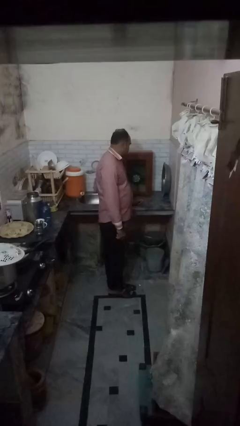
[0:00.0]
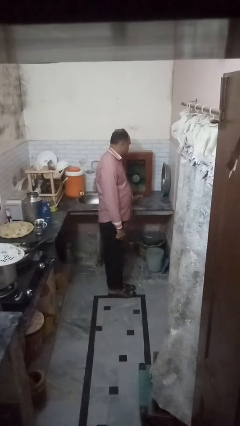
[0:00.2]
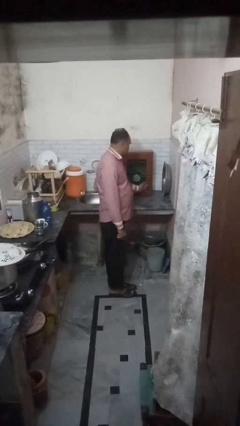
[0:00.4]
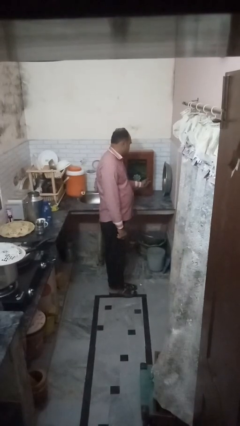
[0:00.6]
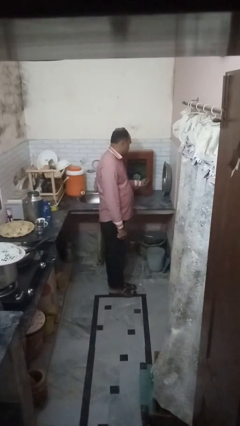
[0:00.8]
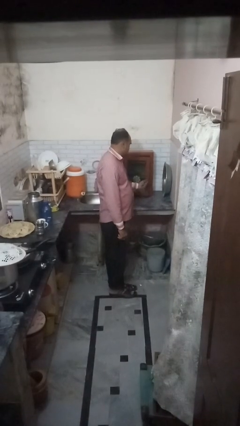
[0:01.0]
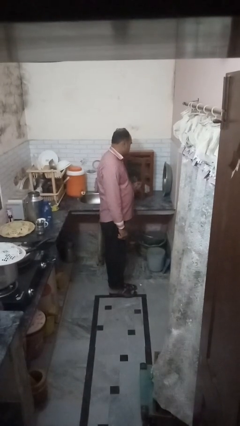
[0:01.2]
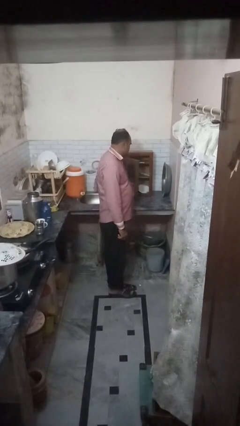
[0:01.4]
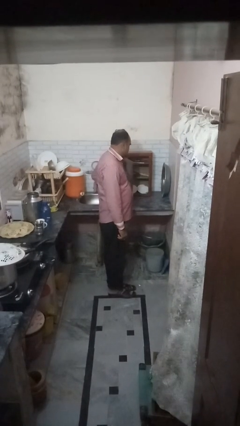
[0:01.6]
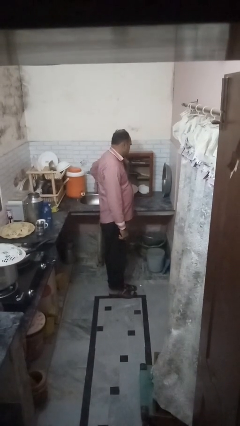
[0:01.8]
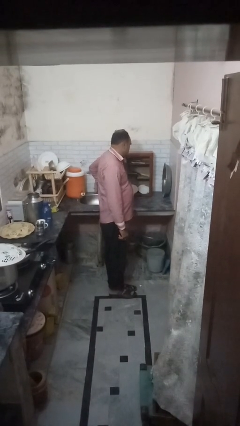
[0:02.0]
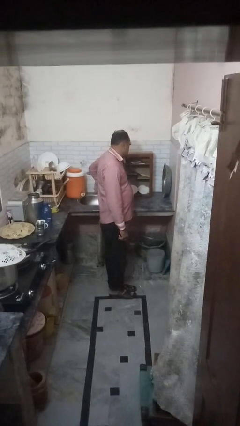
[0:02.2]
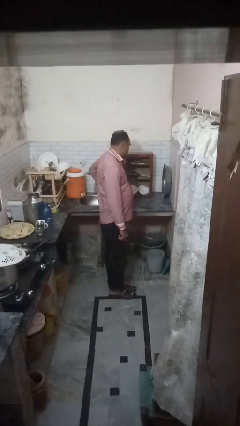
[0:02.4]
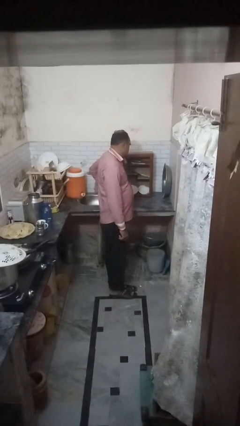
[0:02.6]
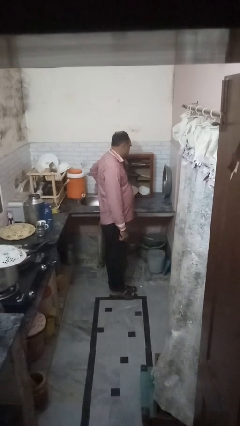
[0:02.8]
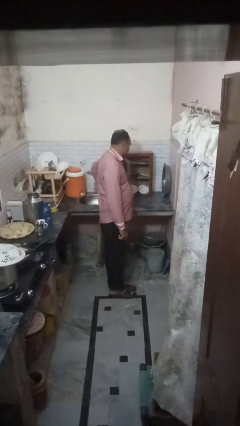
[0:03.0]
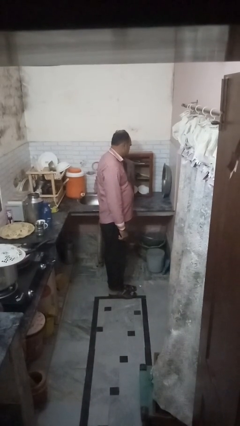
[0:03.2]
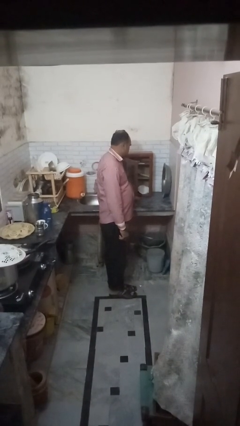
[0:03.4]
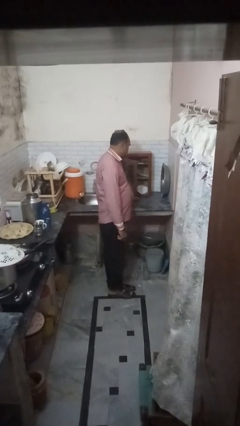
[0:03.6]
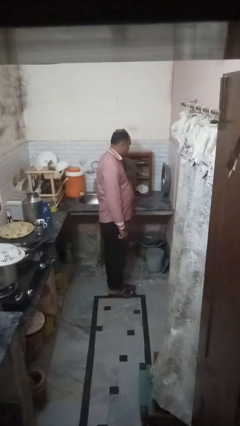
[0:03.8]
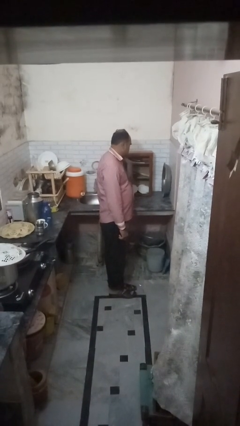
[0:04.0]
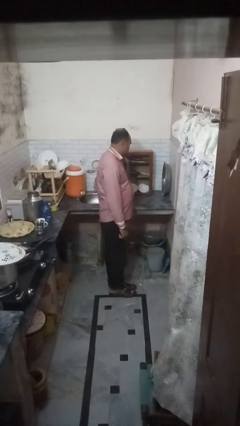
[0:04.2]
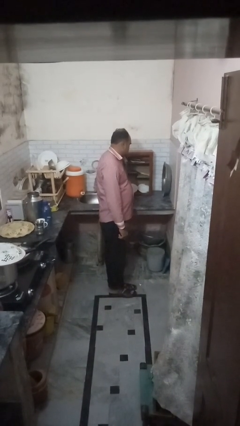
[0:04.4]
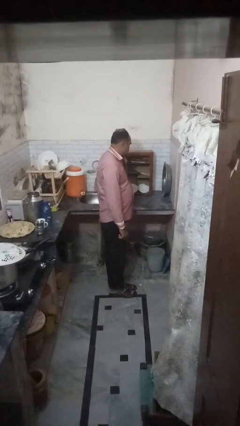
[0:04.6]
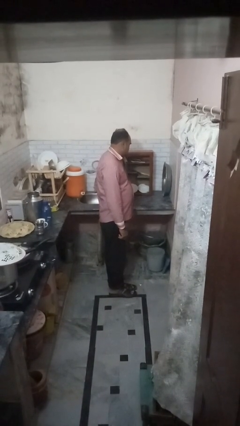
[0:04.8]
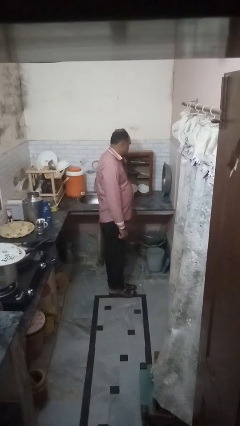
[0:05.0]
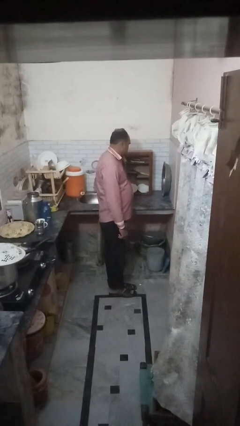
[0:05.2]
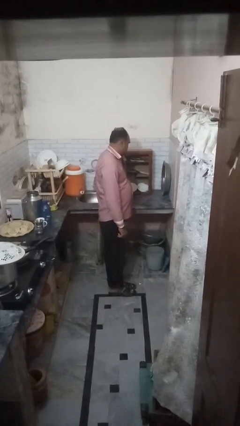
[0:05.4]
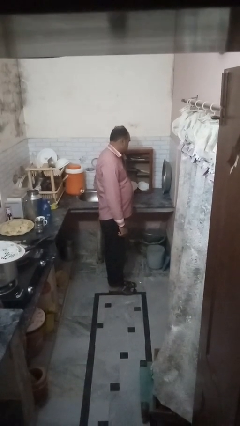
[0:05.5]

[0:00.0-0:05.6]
person opens cabinet

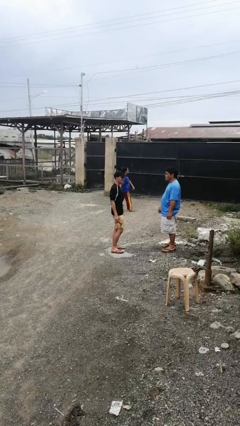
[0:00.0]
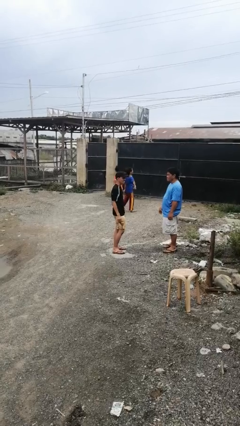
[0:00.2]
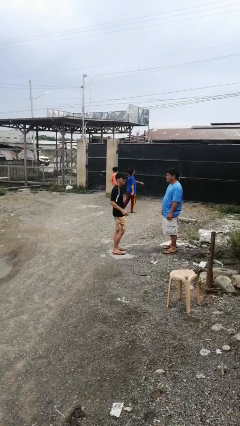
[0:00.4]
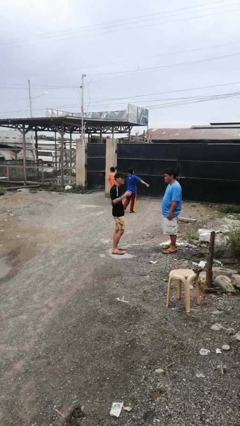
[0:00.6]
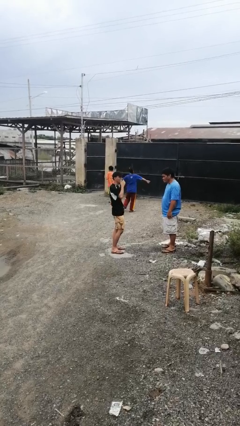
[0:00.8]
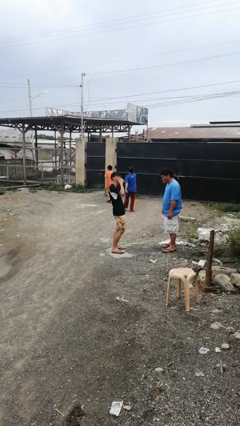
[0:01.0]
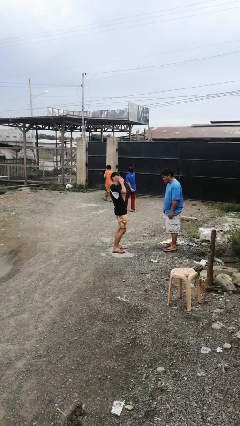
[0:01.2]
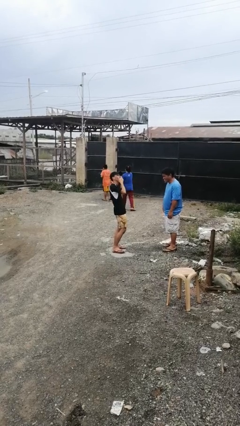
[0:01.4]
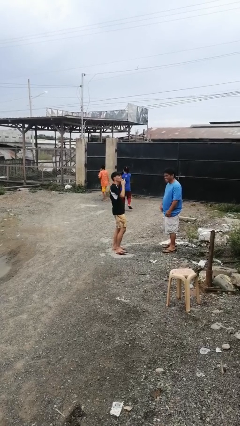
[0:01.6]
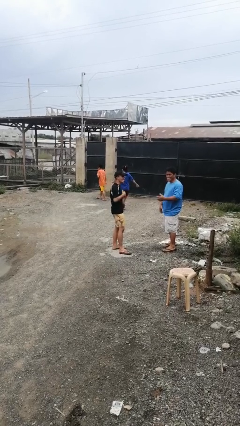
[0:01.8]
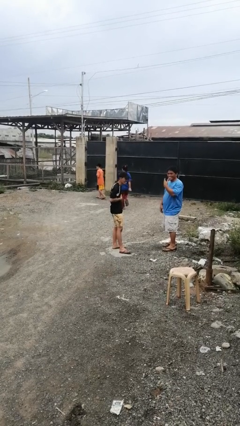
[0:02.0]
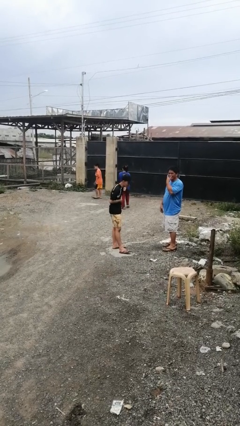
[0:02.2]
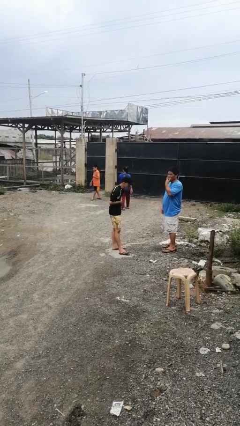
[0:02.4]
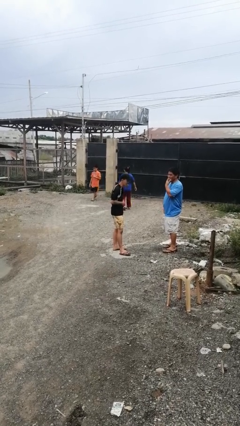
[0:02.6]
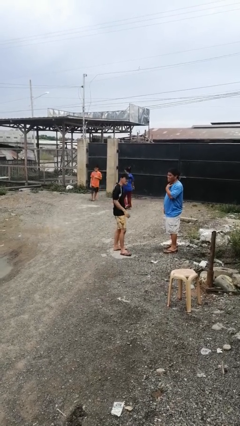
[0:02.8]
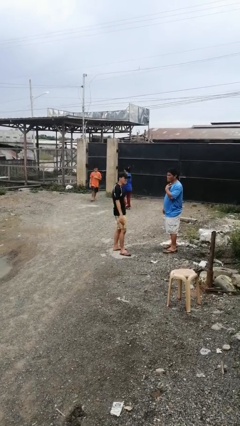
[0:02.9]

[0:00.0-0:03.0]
person laughs with person

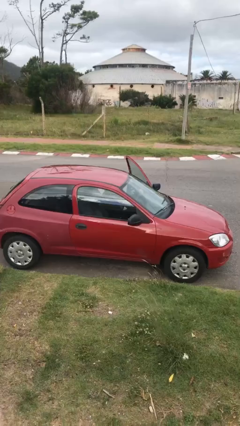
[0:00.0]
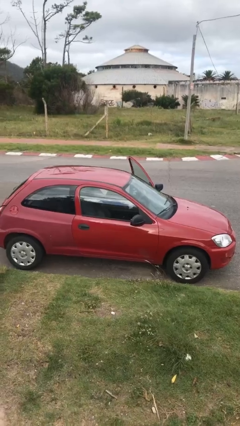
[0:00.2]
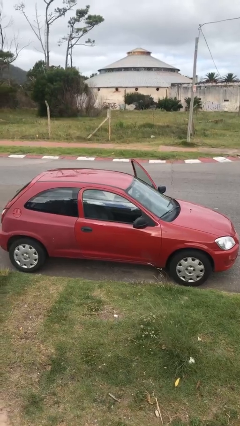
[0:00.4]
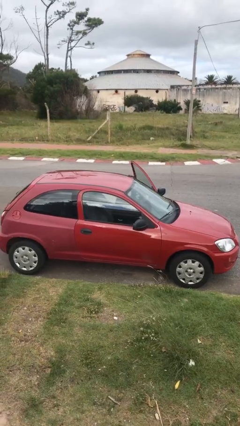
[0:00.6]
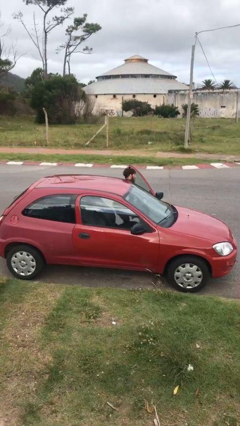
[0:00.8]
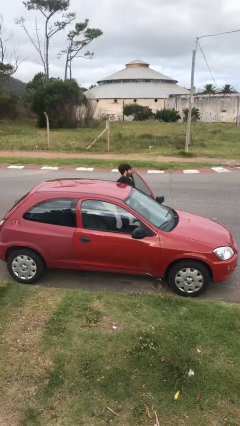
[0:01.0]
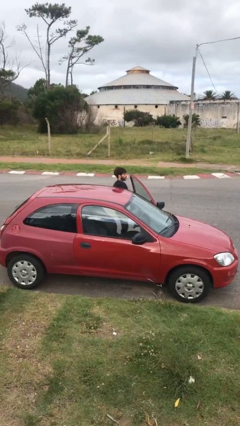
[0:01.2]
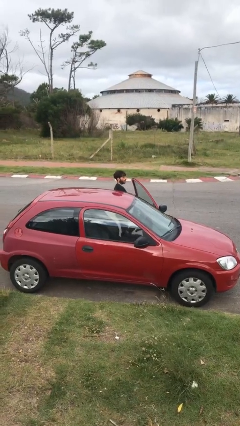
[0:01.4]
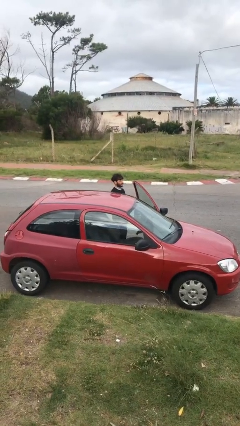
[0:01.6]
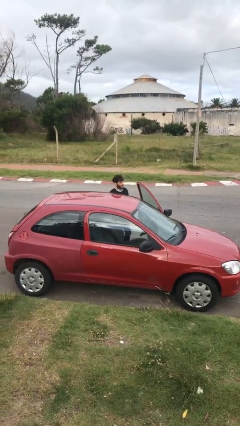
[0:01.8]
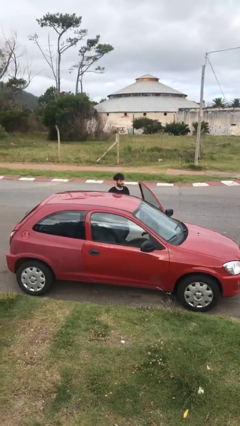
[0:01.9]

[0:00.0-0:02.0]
person exits car

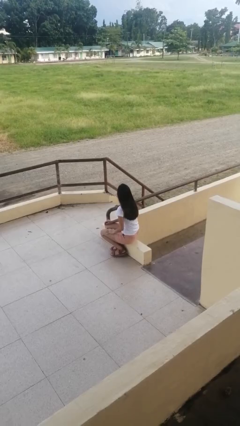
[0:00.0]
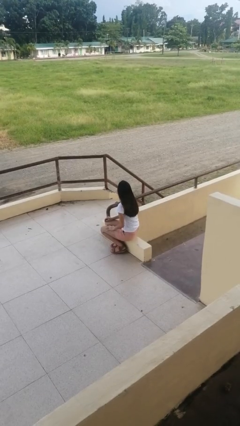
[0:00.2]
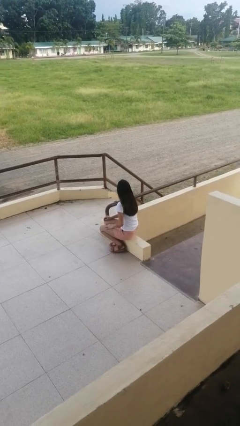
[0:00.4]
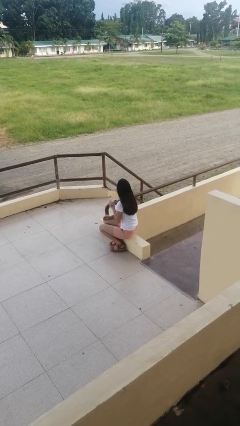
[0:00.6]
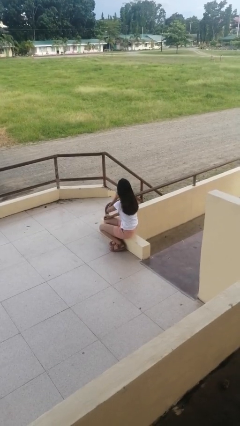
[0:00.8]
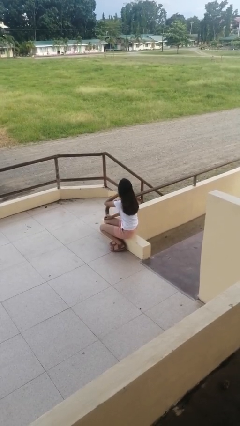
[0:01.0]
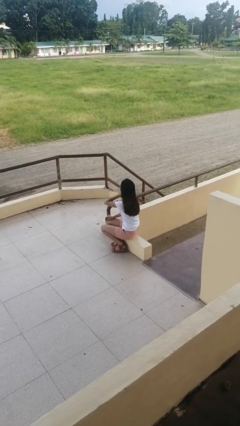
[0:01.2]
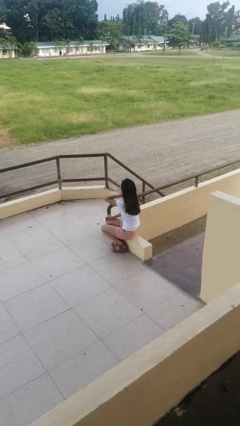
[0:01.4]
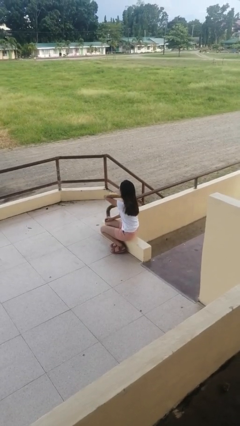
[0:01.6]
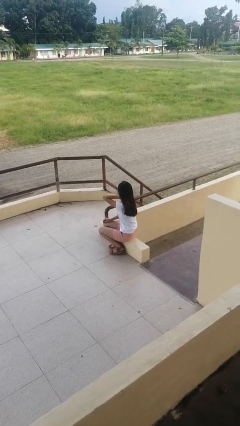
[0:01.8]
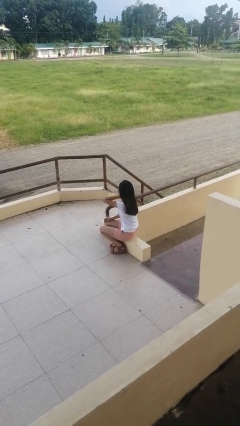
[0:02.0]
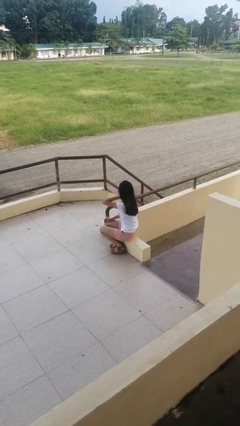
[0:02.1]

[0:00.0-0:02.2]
person rubs neck

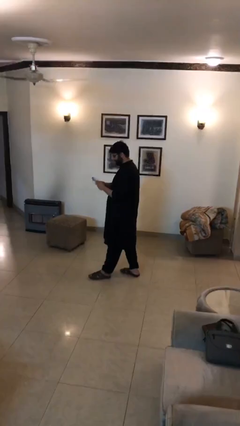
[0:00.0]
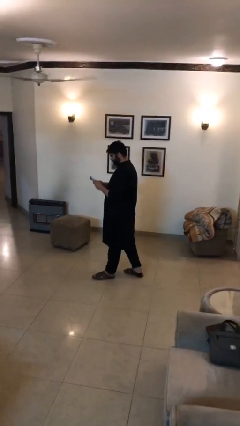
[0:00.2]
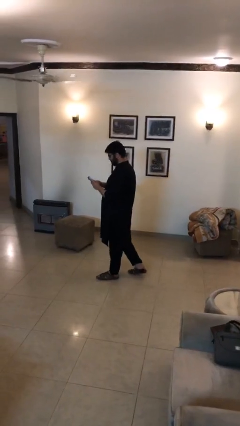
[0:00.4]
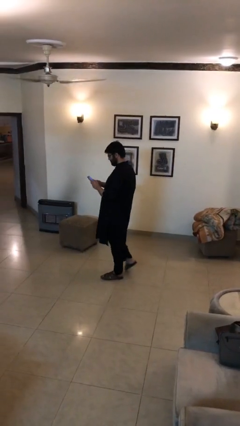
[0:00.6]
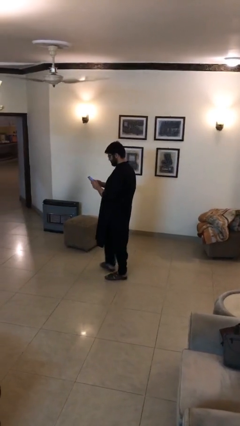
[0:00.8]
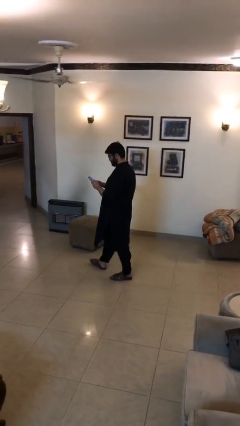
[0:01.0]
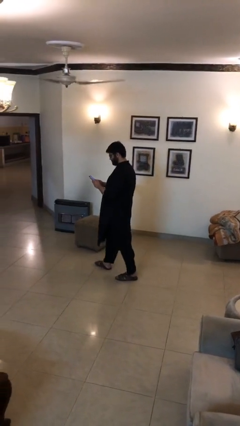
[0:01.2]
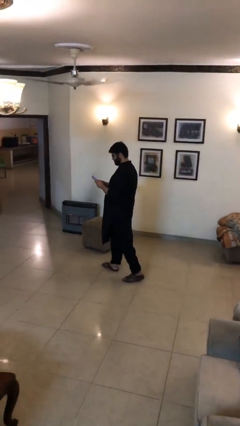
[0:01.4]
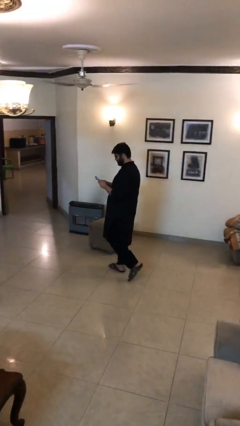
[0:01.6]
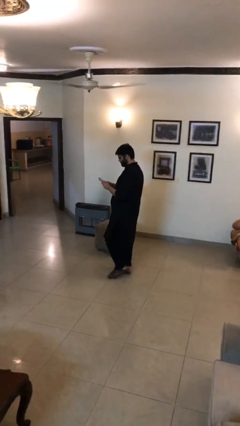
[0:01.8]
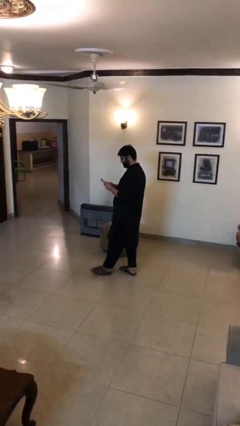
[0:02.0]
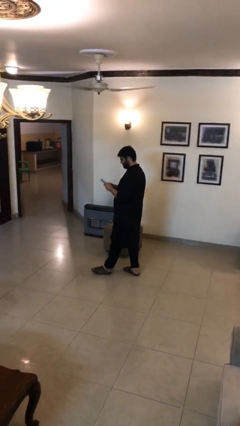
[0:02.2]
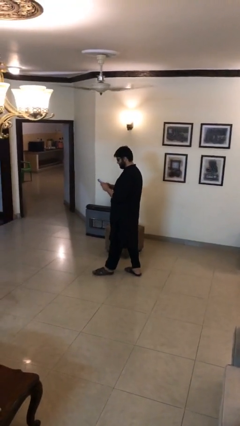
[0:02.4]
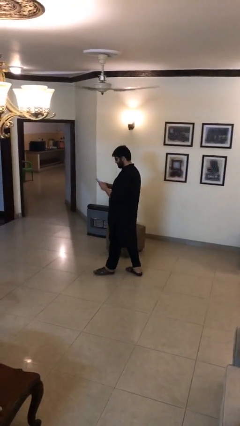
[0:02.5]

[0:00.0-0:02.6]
person texts on phone

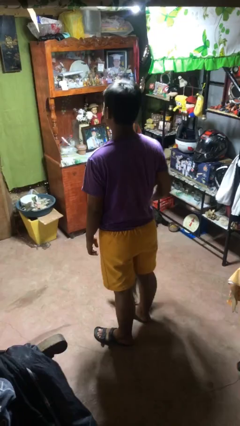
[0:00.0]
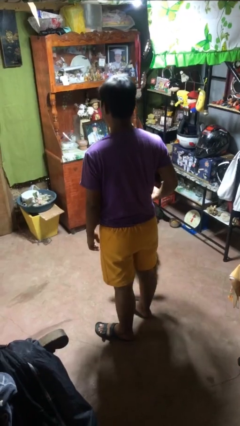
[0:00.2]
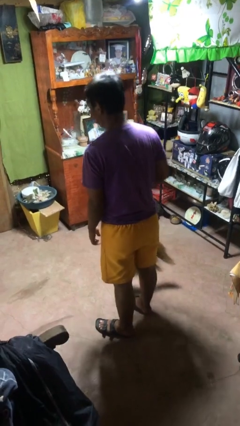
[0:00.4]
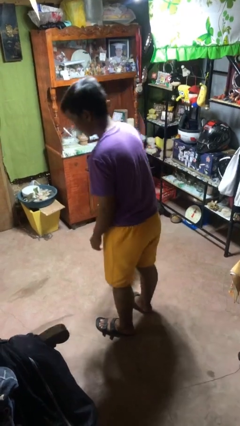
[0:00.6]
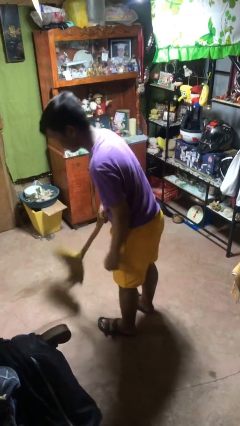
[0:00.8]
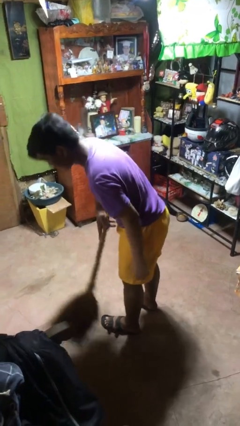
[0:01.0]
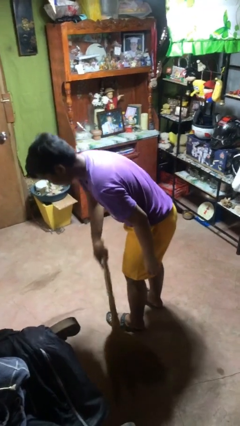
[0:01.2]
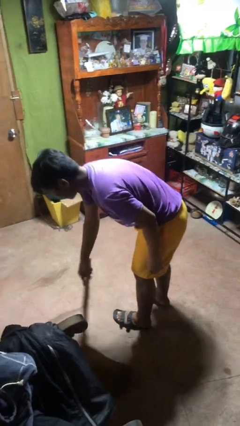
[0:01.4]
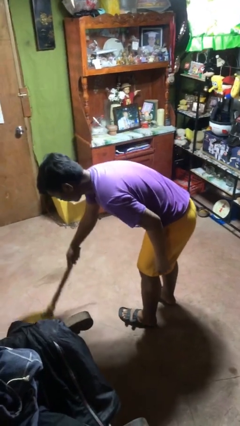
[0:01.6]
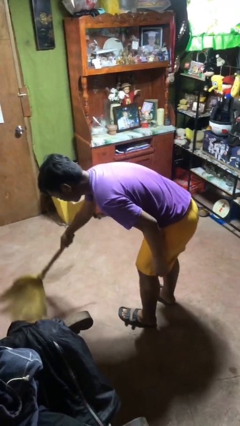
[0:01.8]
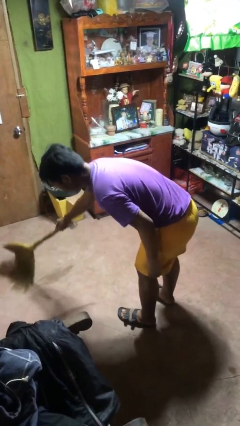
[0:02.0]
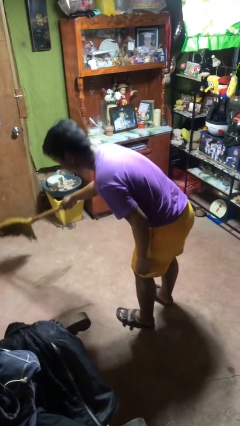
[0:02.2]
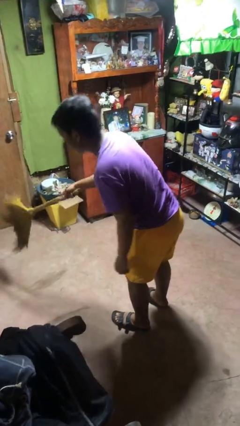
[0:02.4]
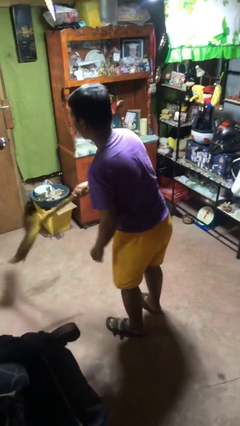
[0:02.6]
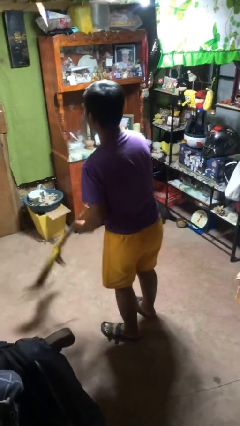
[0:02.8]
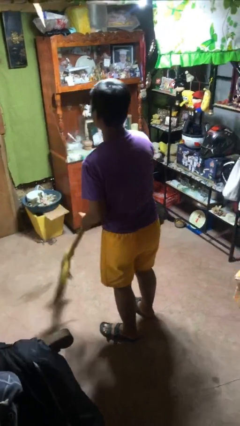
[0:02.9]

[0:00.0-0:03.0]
person sweeps floor
